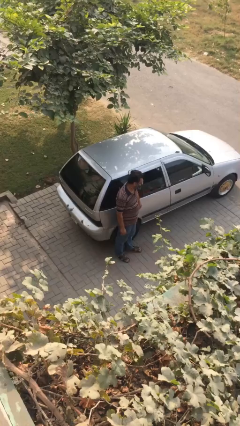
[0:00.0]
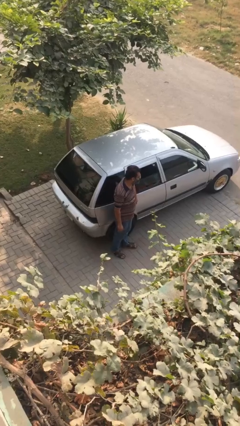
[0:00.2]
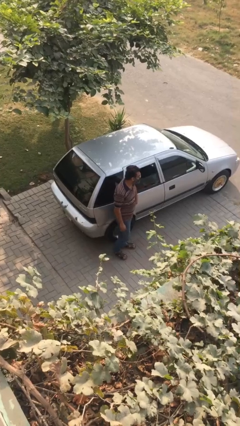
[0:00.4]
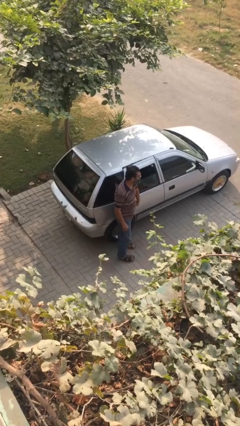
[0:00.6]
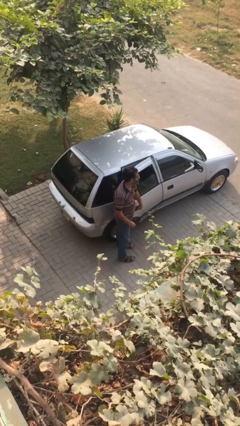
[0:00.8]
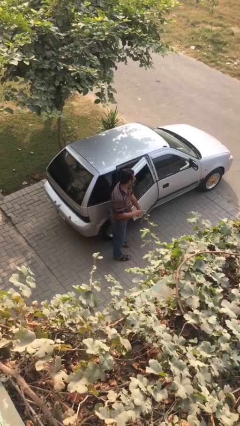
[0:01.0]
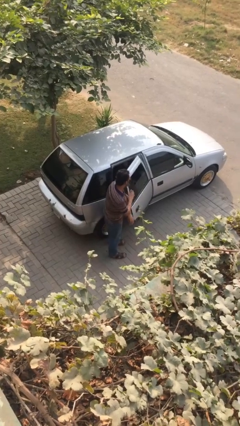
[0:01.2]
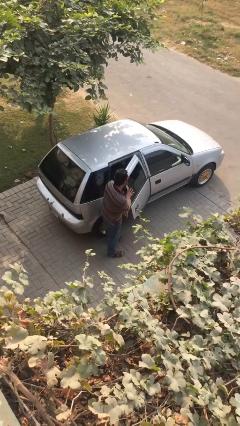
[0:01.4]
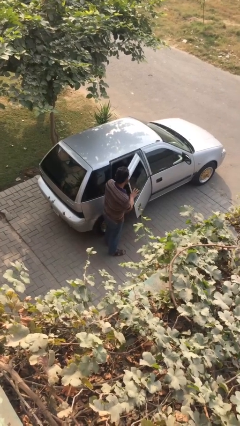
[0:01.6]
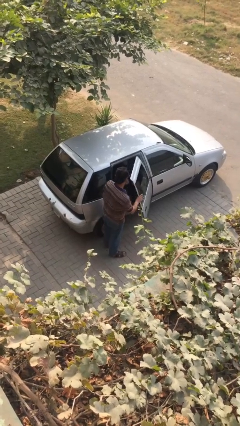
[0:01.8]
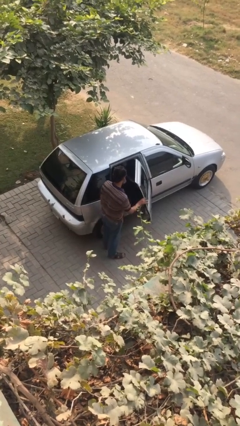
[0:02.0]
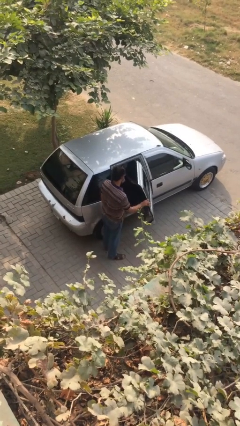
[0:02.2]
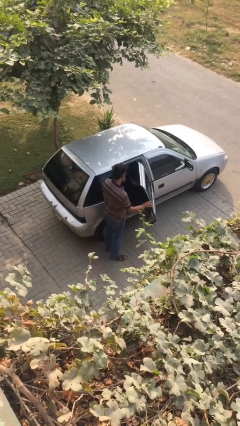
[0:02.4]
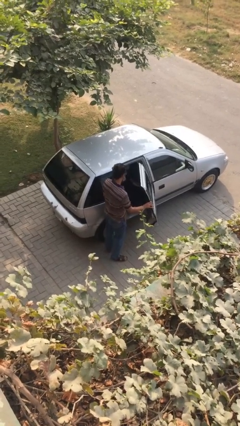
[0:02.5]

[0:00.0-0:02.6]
person opens car door

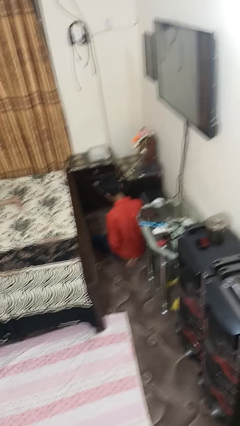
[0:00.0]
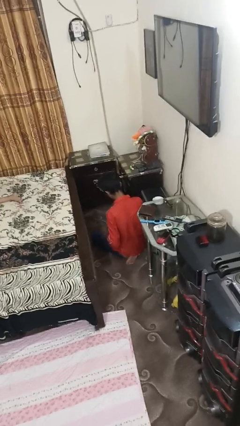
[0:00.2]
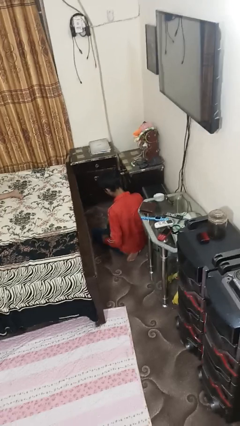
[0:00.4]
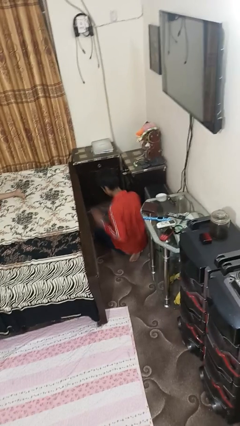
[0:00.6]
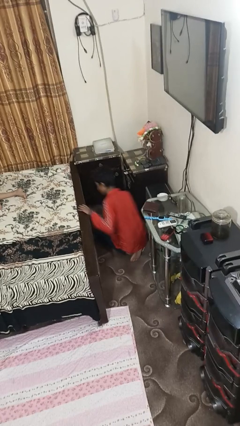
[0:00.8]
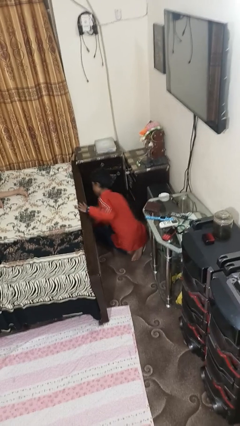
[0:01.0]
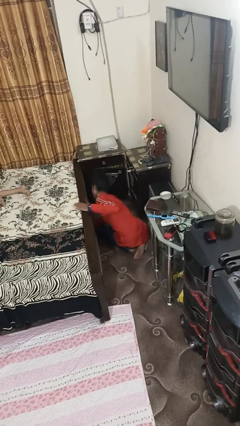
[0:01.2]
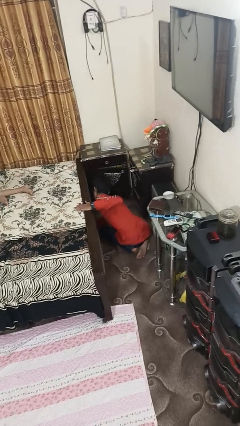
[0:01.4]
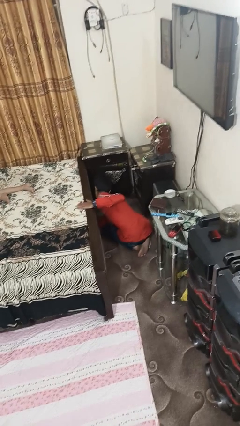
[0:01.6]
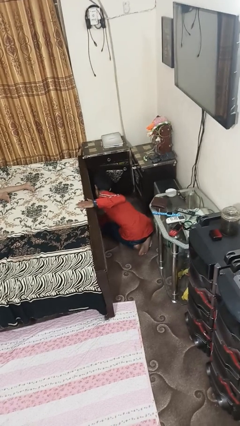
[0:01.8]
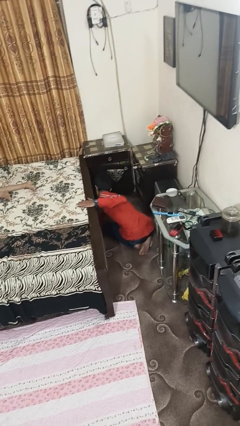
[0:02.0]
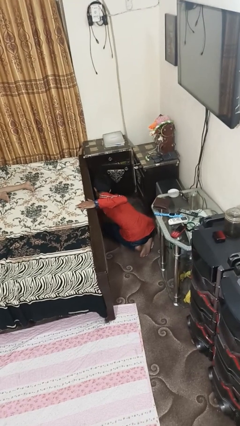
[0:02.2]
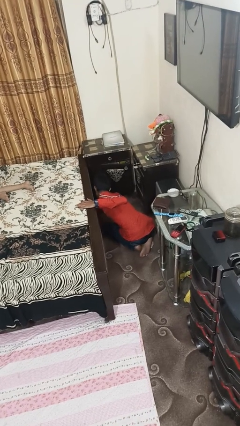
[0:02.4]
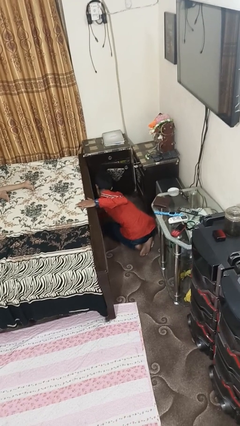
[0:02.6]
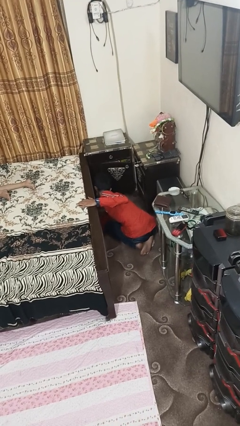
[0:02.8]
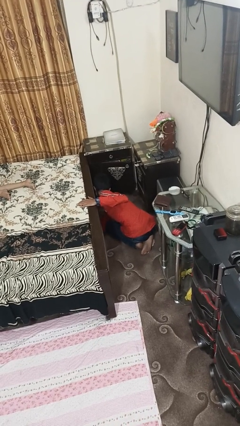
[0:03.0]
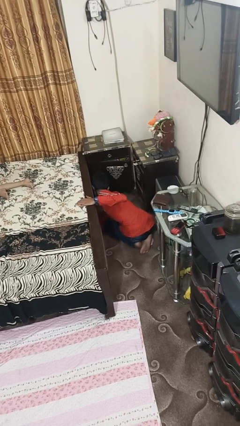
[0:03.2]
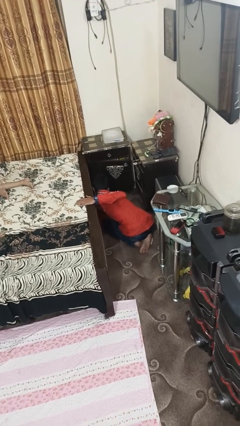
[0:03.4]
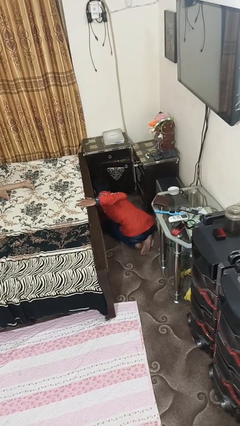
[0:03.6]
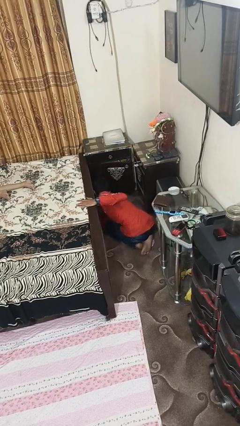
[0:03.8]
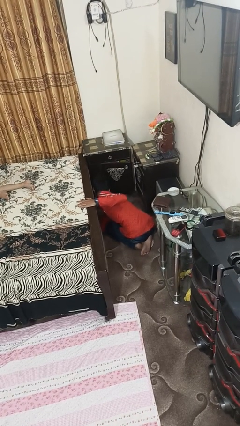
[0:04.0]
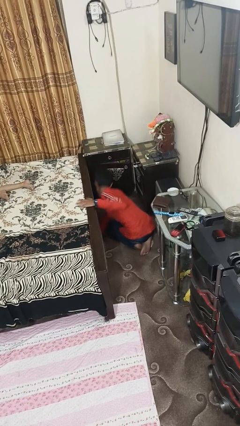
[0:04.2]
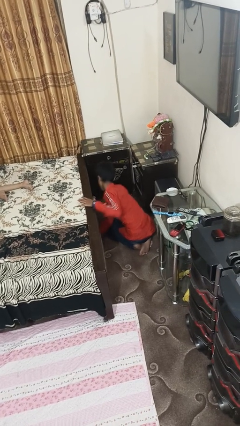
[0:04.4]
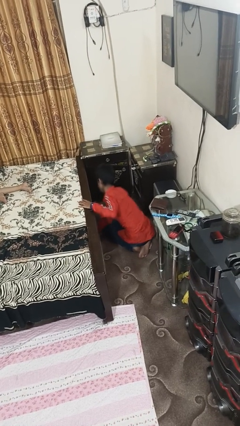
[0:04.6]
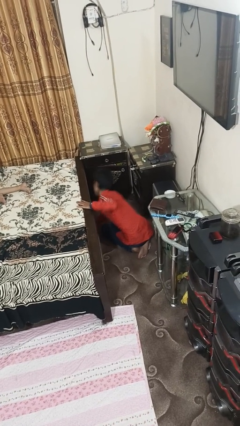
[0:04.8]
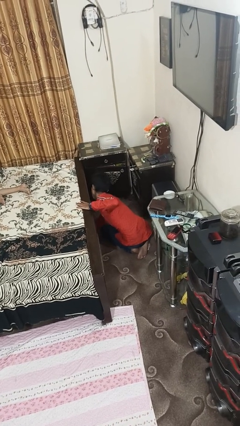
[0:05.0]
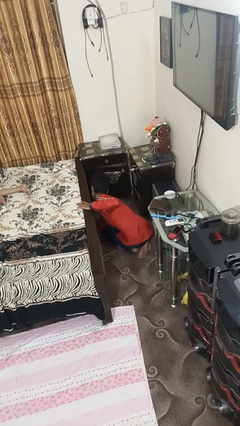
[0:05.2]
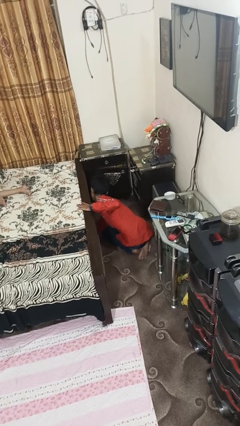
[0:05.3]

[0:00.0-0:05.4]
person searches under bed

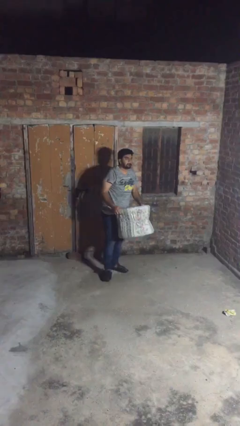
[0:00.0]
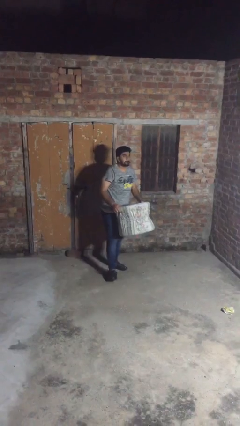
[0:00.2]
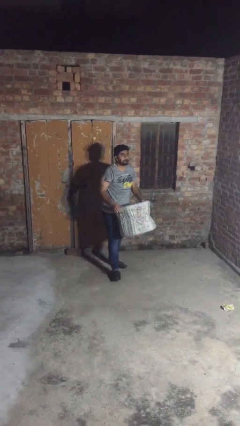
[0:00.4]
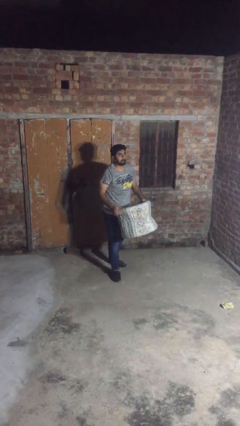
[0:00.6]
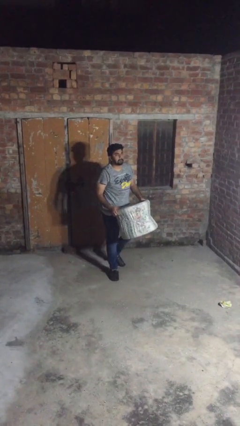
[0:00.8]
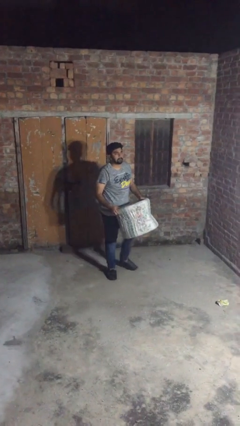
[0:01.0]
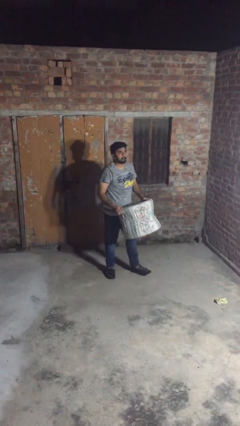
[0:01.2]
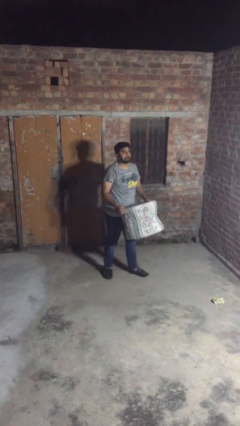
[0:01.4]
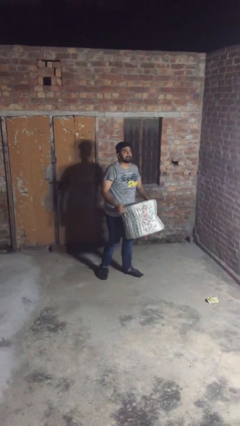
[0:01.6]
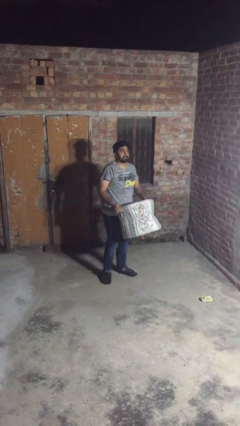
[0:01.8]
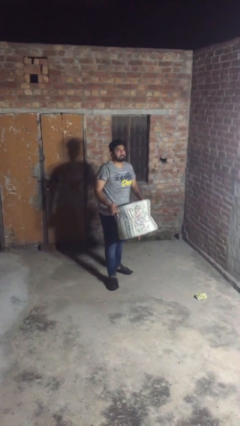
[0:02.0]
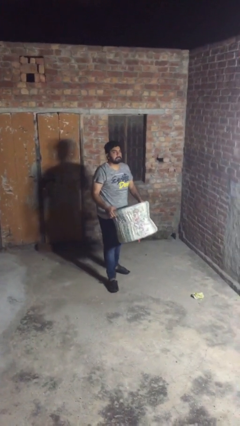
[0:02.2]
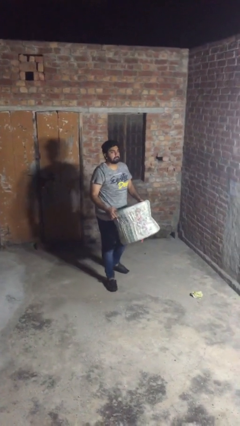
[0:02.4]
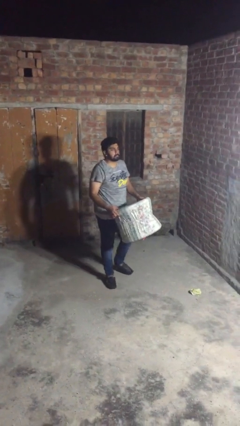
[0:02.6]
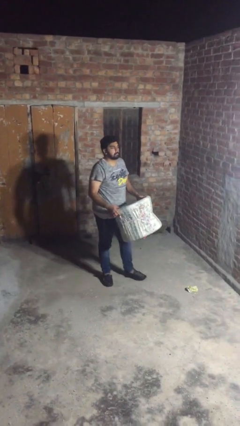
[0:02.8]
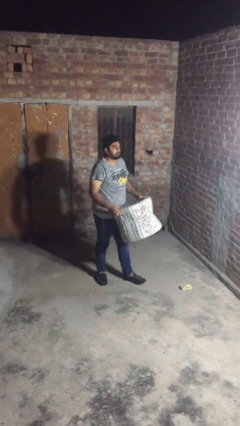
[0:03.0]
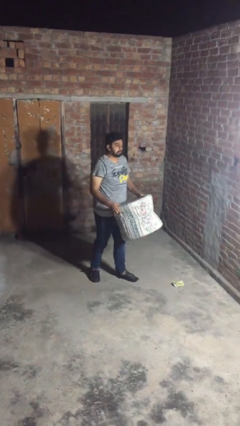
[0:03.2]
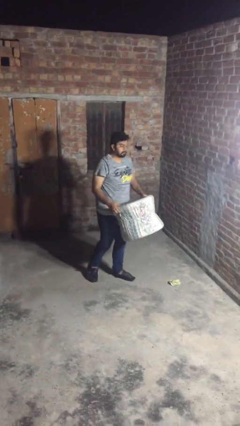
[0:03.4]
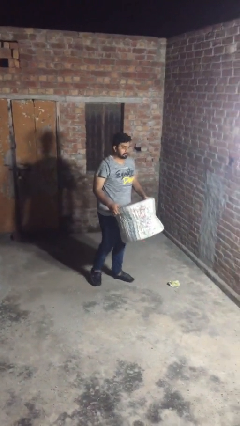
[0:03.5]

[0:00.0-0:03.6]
person carries heavy object

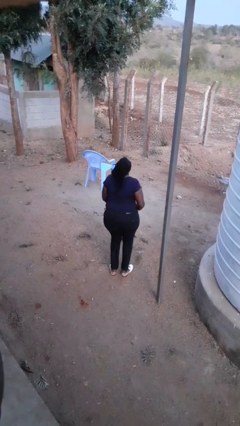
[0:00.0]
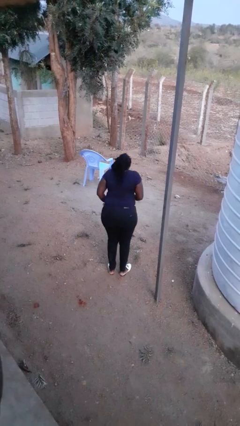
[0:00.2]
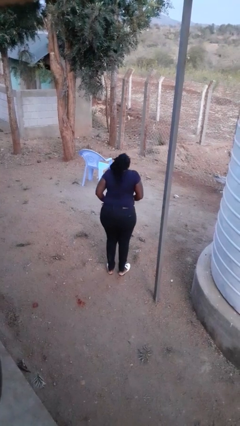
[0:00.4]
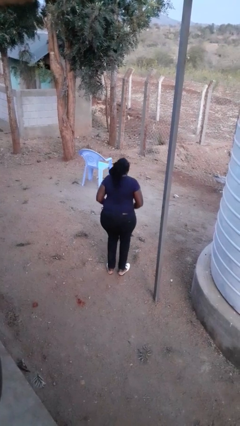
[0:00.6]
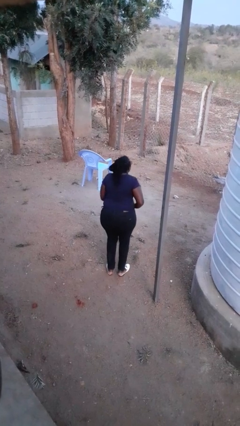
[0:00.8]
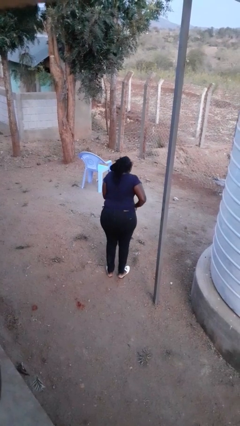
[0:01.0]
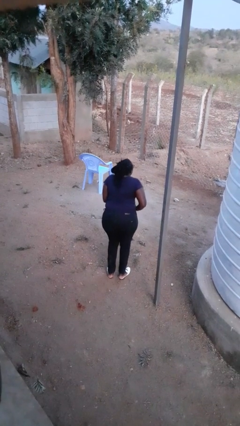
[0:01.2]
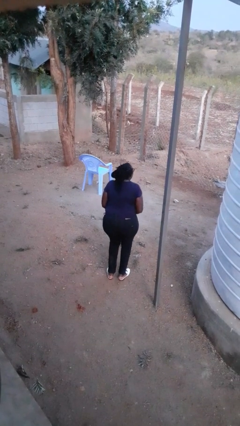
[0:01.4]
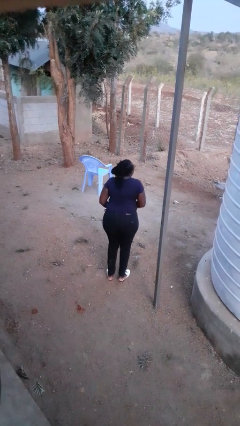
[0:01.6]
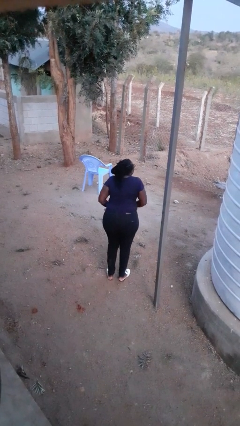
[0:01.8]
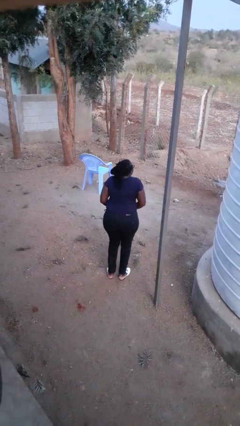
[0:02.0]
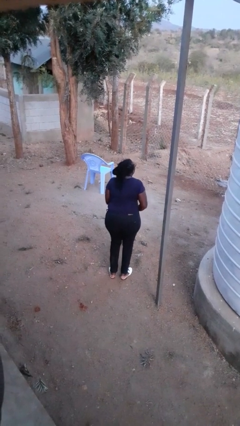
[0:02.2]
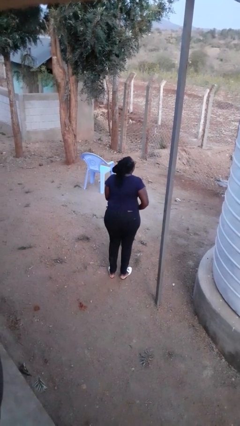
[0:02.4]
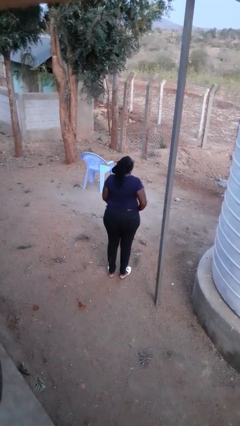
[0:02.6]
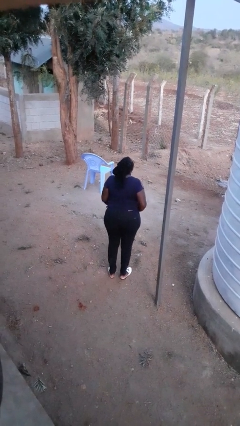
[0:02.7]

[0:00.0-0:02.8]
person dances in place

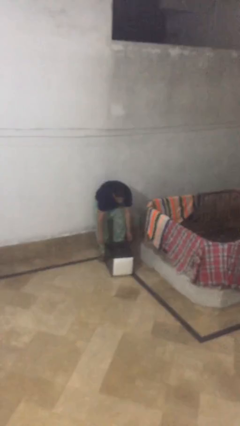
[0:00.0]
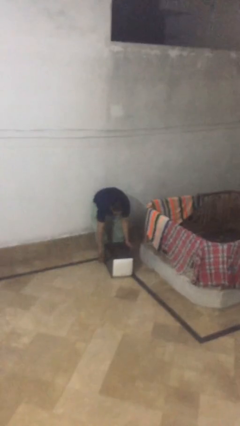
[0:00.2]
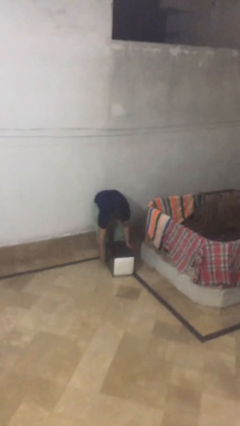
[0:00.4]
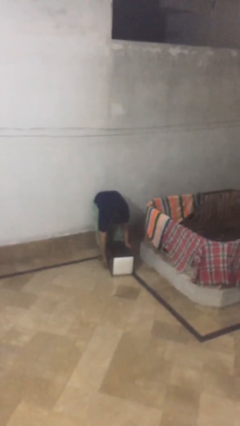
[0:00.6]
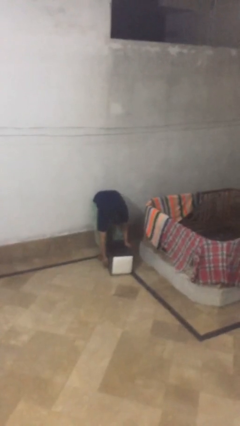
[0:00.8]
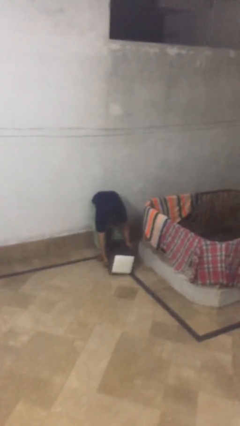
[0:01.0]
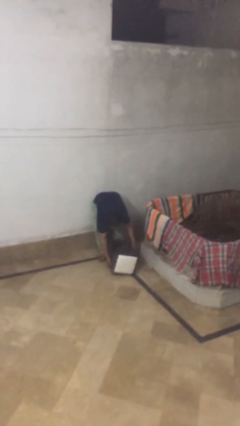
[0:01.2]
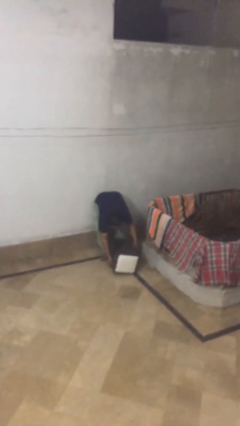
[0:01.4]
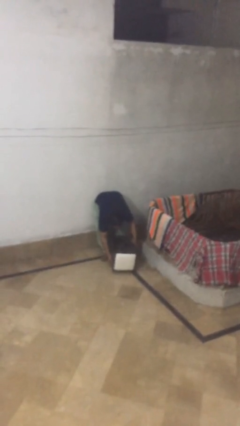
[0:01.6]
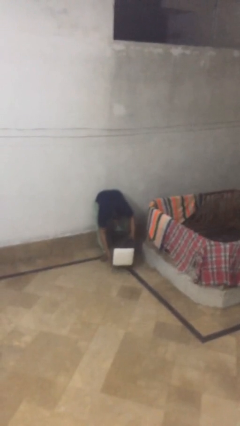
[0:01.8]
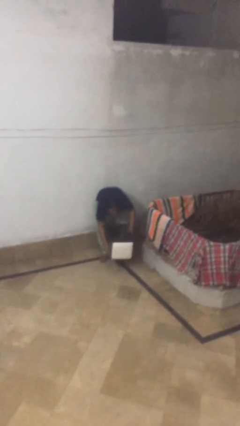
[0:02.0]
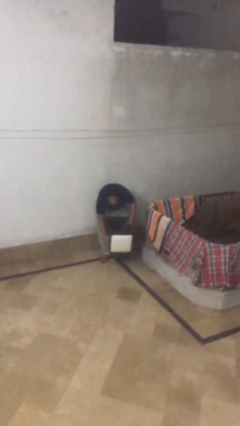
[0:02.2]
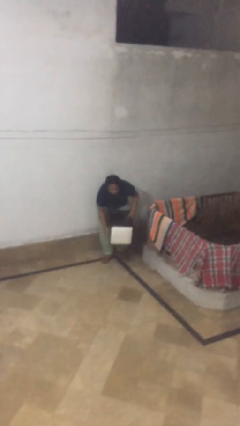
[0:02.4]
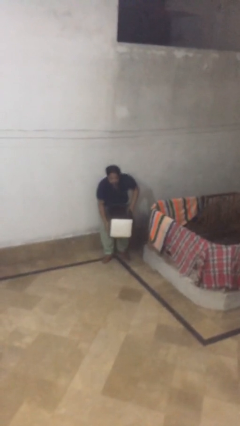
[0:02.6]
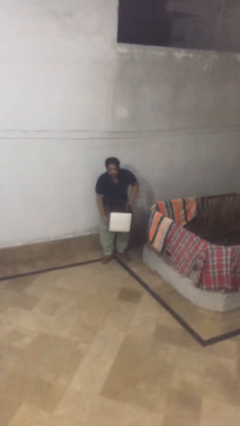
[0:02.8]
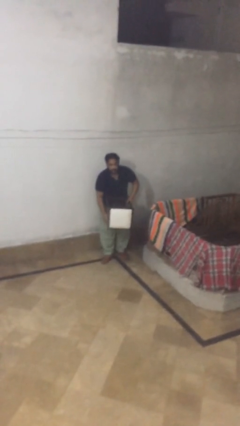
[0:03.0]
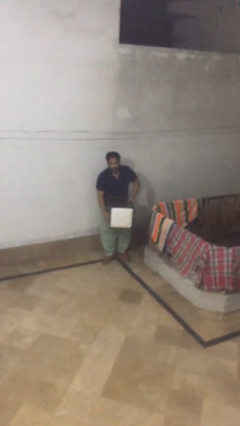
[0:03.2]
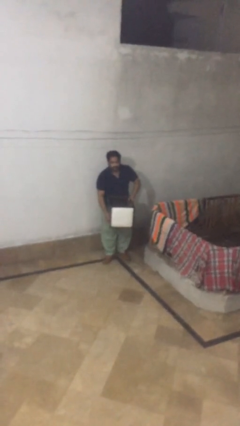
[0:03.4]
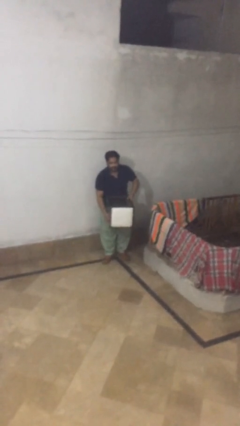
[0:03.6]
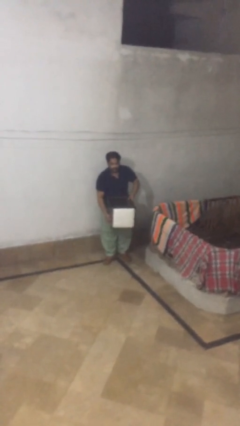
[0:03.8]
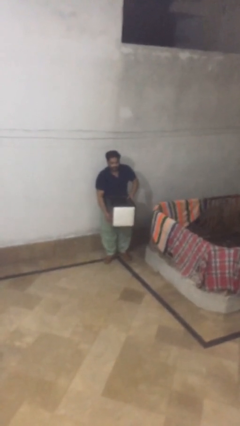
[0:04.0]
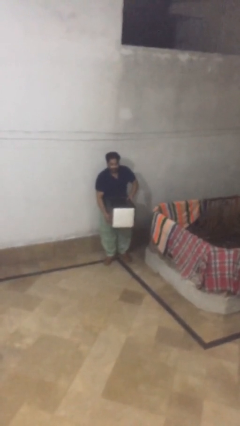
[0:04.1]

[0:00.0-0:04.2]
person picks up object from floor
